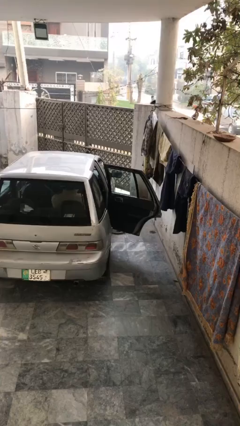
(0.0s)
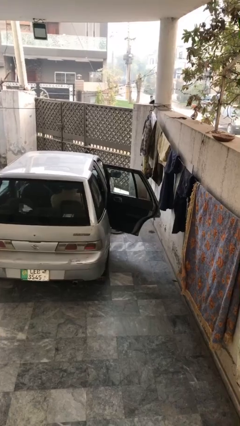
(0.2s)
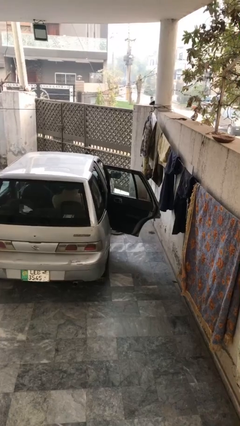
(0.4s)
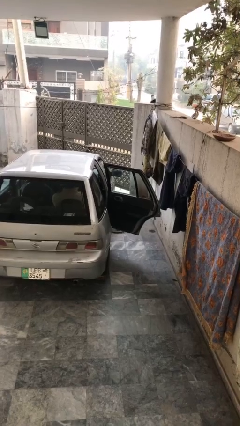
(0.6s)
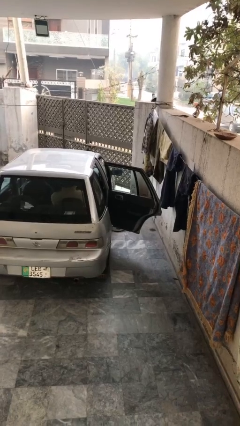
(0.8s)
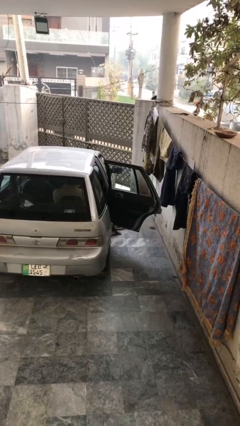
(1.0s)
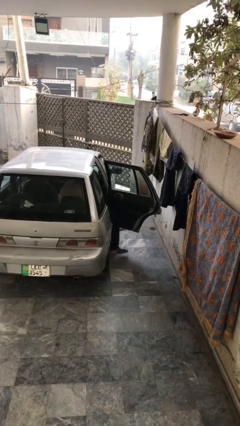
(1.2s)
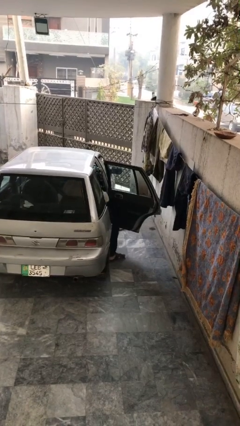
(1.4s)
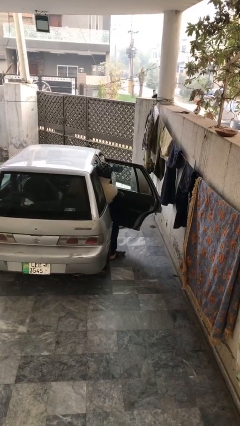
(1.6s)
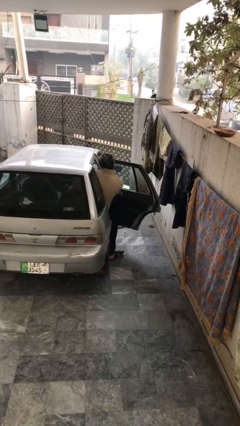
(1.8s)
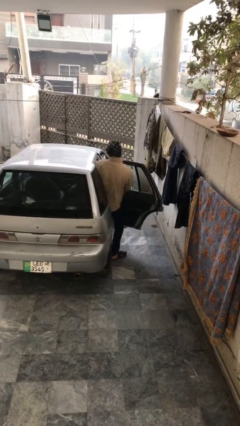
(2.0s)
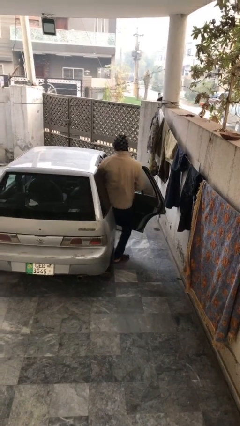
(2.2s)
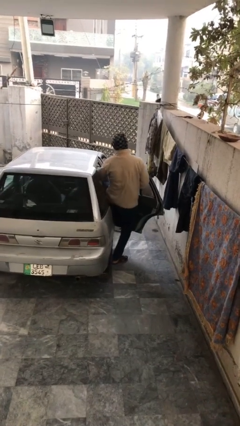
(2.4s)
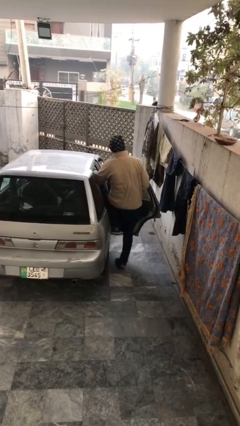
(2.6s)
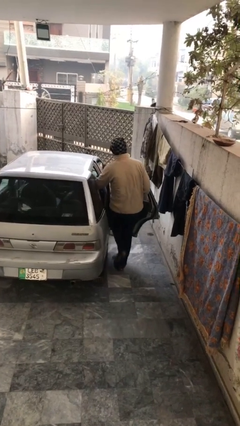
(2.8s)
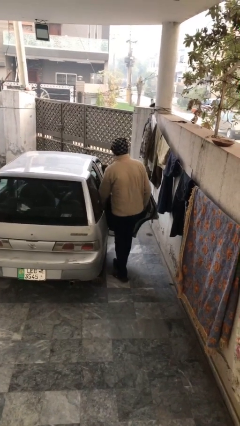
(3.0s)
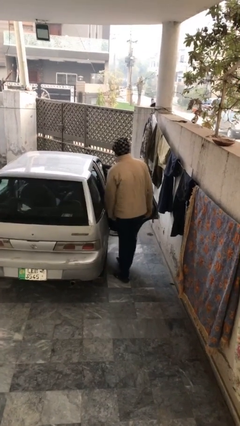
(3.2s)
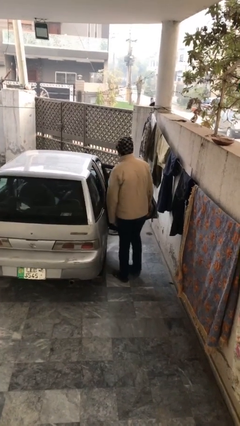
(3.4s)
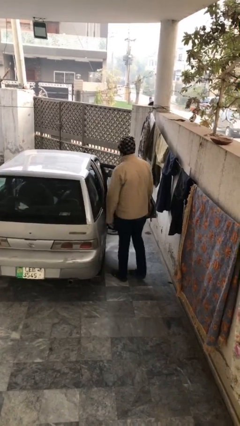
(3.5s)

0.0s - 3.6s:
person exits car

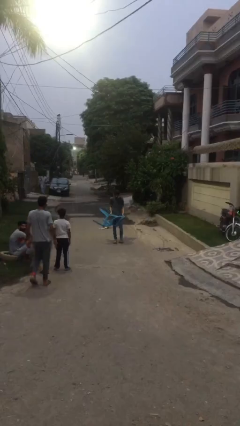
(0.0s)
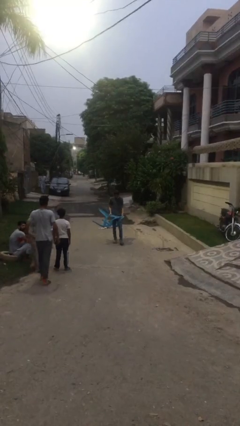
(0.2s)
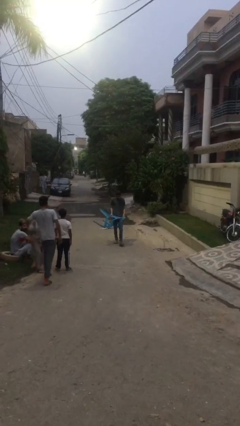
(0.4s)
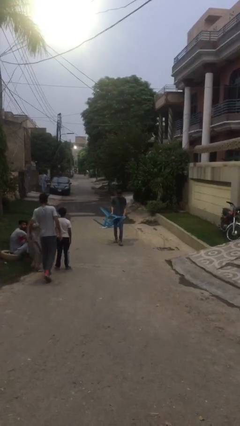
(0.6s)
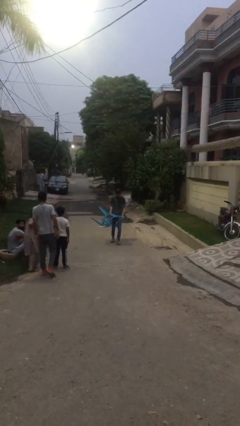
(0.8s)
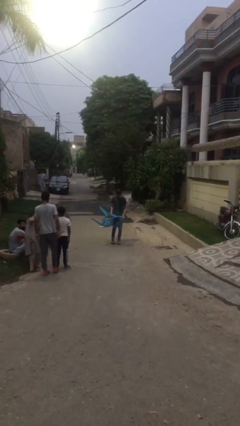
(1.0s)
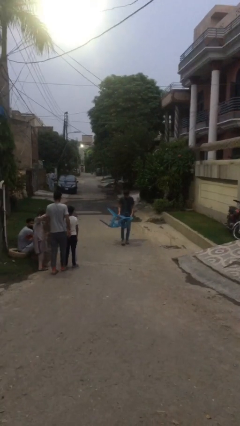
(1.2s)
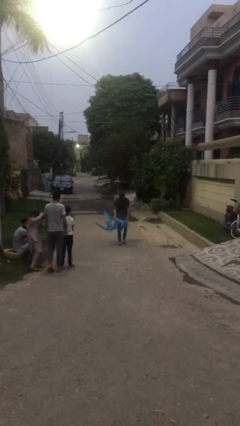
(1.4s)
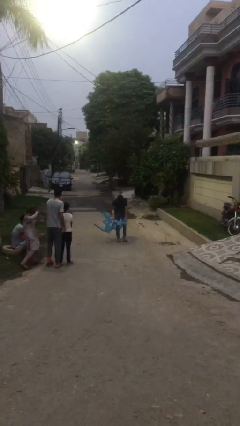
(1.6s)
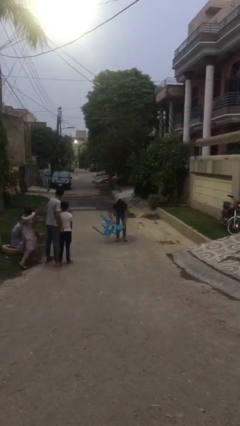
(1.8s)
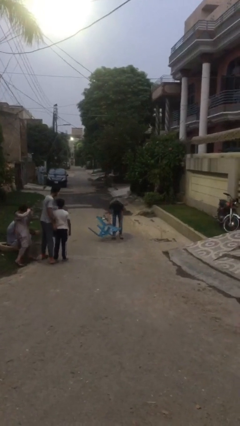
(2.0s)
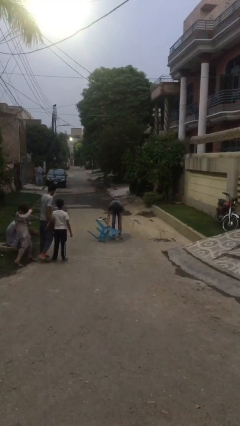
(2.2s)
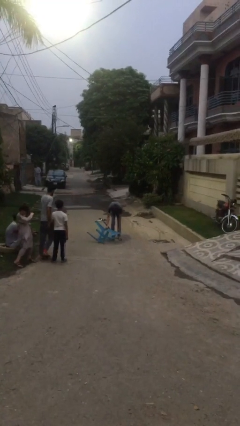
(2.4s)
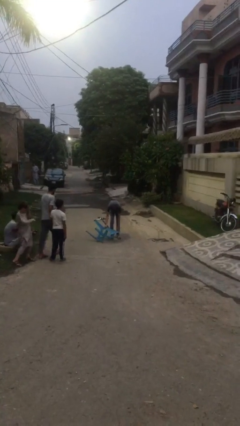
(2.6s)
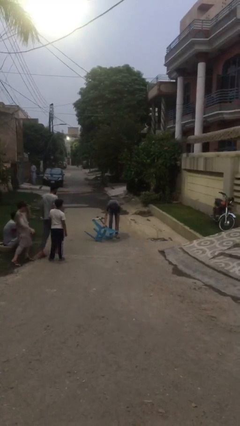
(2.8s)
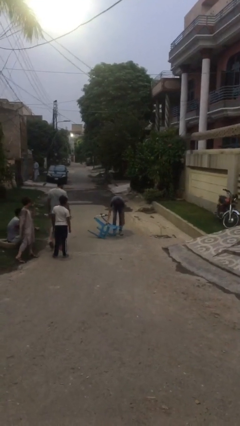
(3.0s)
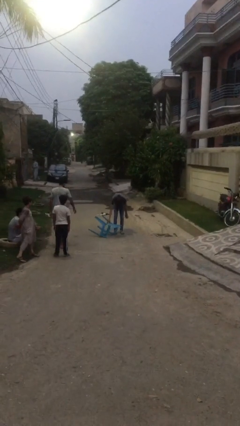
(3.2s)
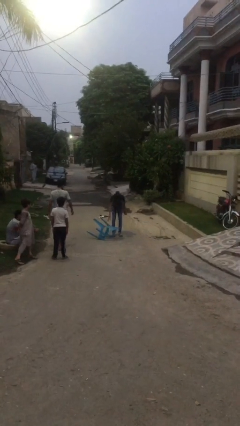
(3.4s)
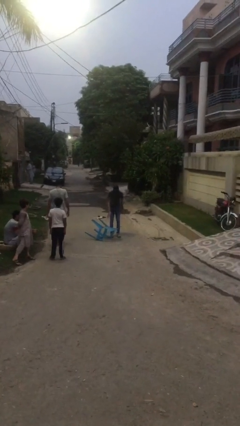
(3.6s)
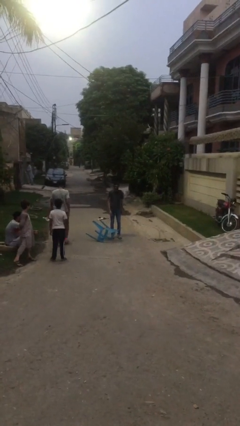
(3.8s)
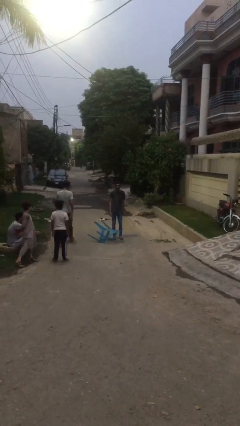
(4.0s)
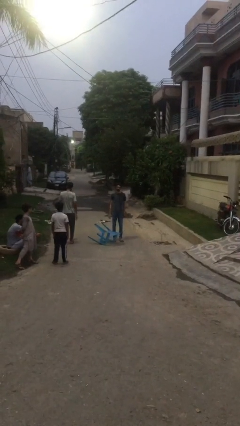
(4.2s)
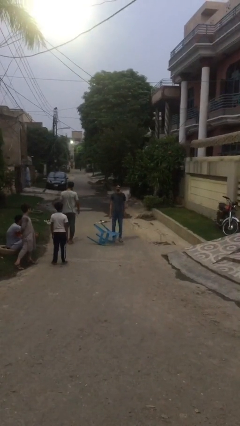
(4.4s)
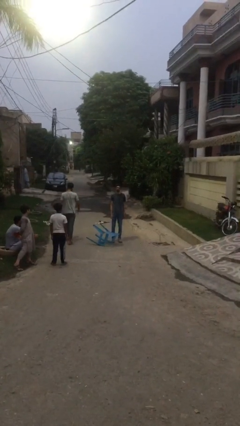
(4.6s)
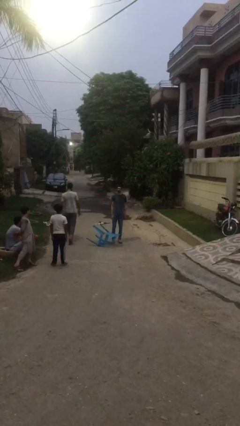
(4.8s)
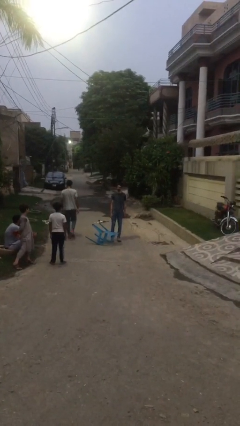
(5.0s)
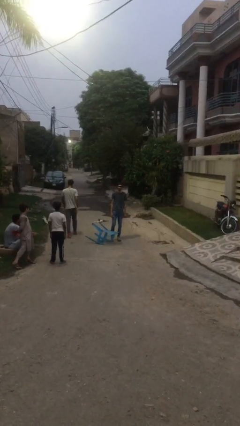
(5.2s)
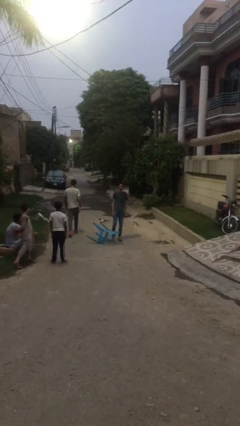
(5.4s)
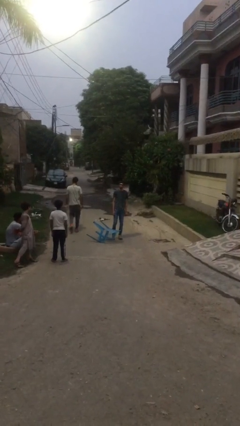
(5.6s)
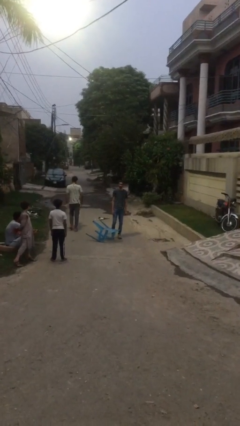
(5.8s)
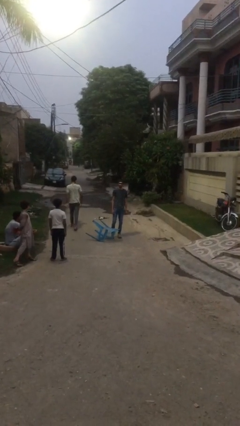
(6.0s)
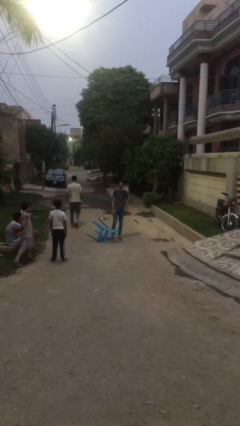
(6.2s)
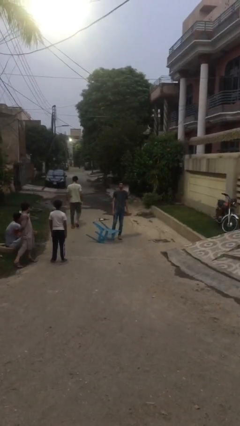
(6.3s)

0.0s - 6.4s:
person puts down object on floor

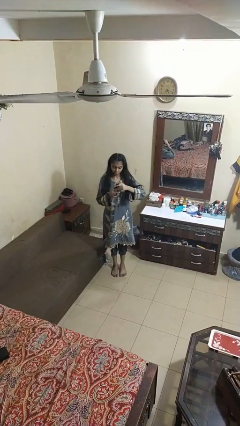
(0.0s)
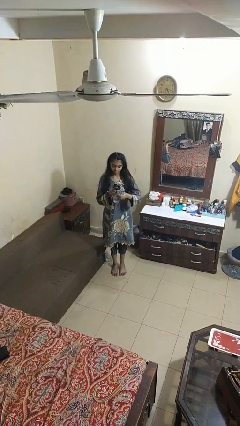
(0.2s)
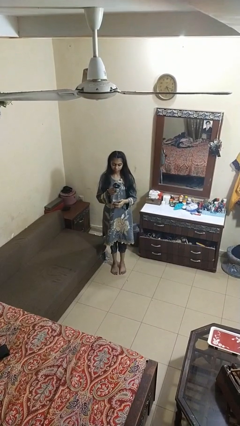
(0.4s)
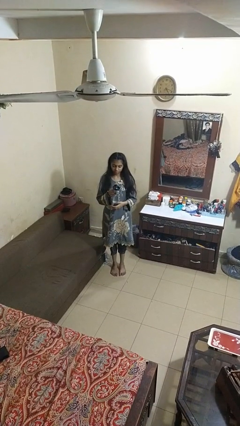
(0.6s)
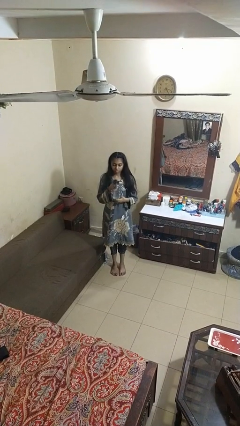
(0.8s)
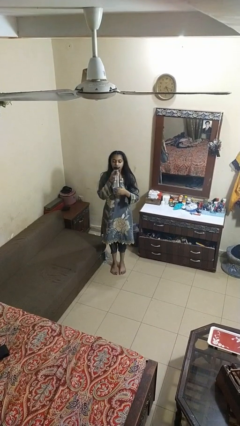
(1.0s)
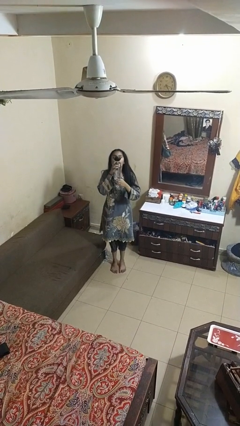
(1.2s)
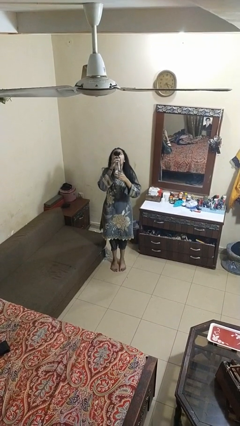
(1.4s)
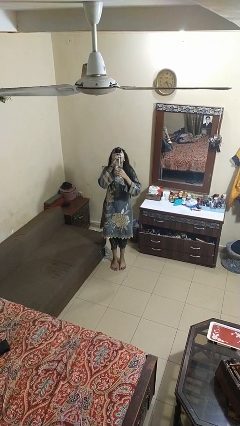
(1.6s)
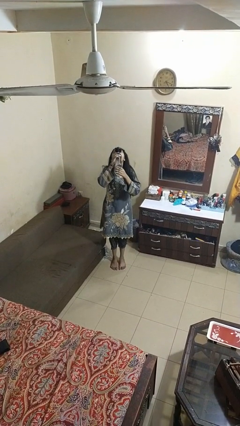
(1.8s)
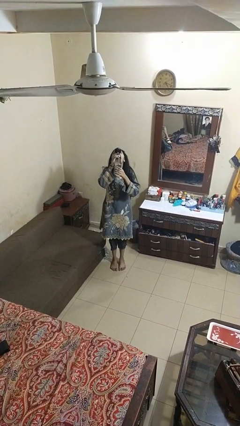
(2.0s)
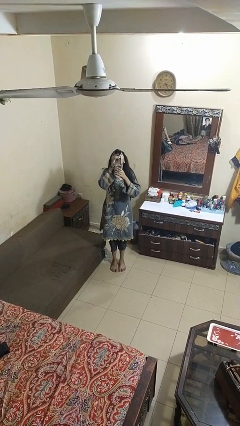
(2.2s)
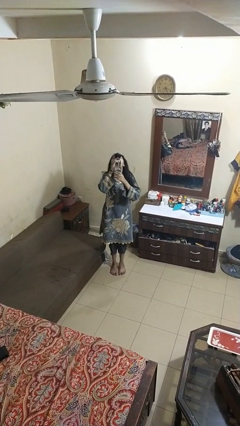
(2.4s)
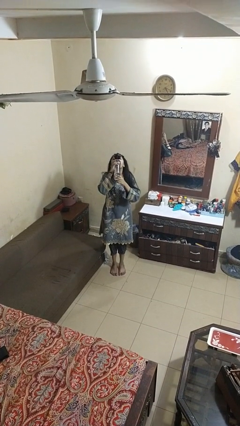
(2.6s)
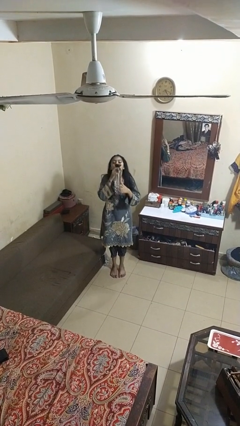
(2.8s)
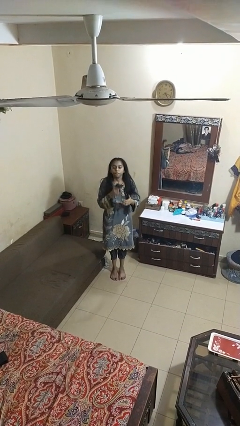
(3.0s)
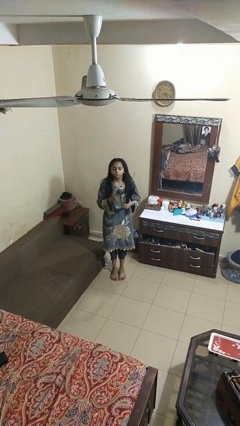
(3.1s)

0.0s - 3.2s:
person drinks from bottle

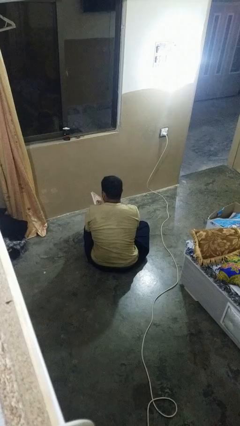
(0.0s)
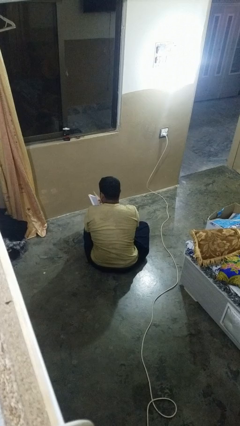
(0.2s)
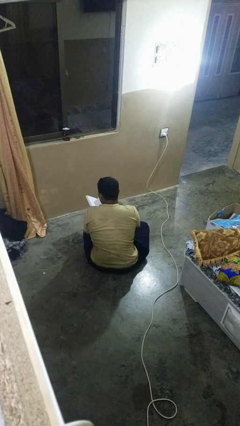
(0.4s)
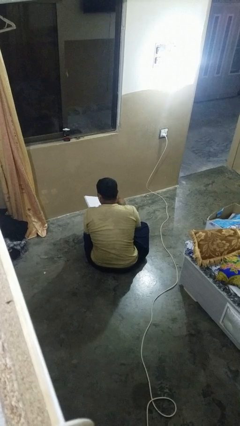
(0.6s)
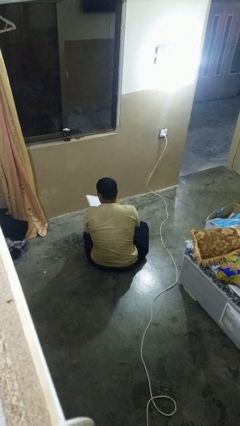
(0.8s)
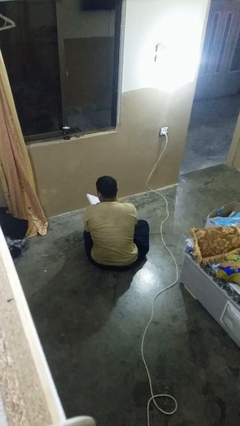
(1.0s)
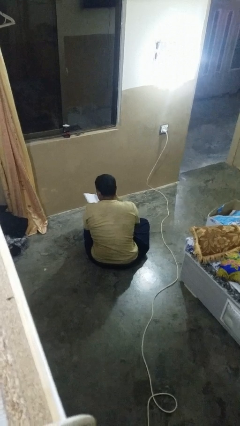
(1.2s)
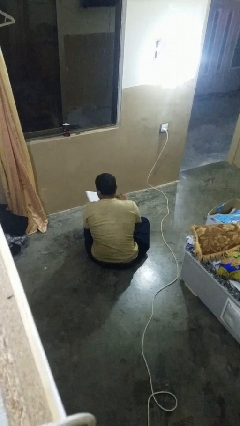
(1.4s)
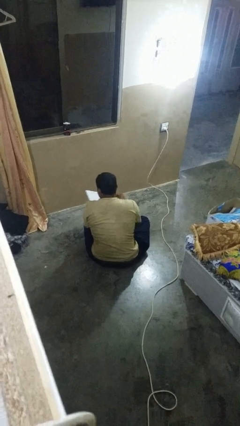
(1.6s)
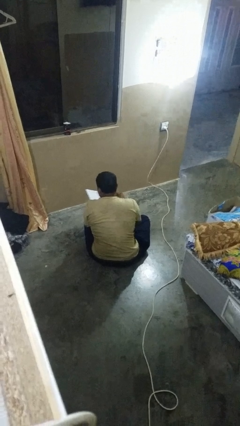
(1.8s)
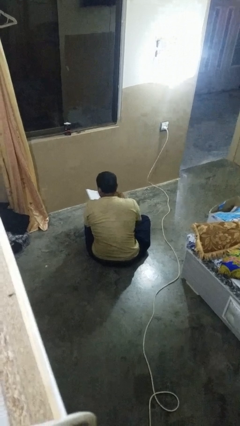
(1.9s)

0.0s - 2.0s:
person reads book

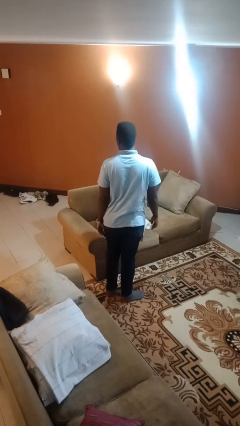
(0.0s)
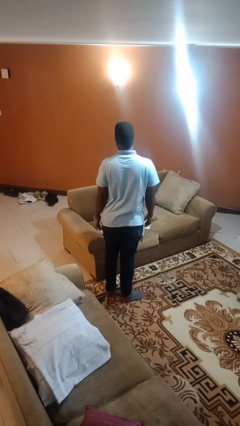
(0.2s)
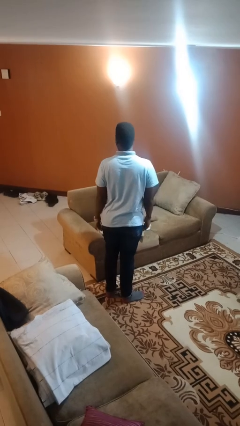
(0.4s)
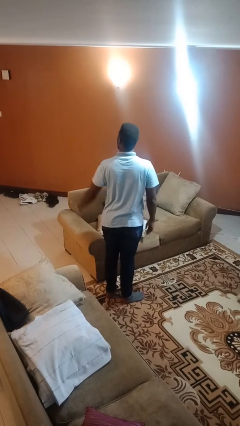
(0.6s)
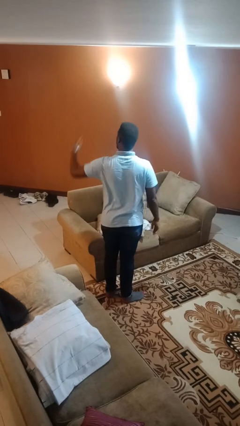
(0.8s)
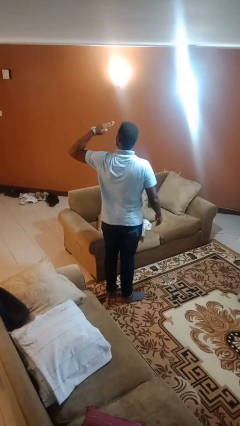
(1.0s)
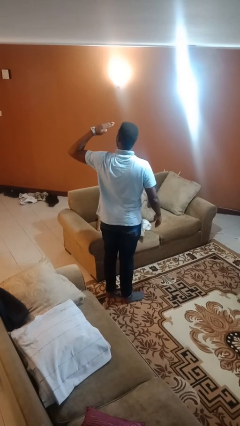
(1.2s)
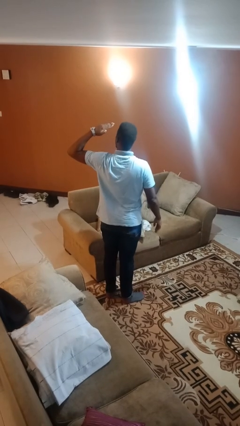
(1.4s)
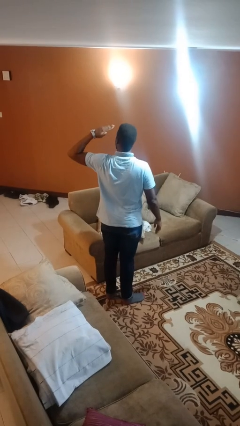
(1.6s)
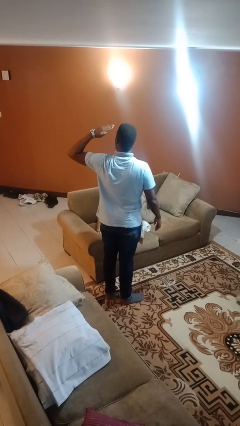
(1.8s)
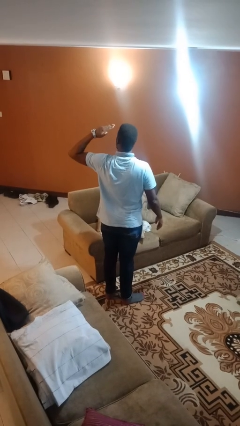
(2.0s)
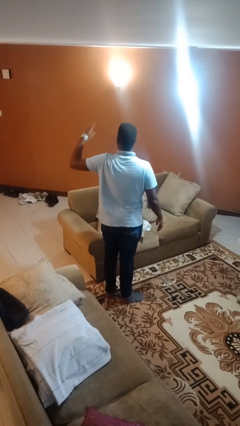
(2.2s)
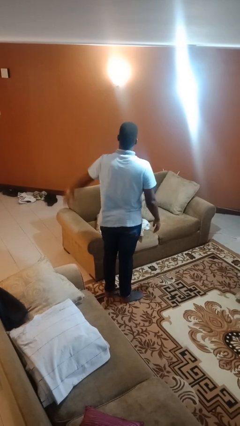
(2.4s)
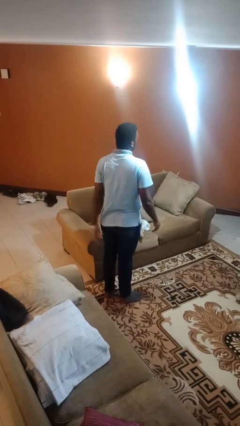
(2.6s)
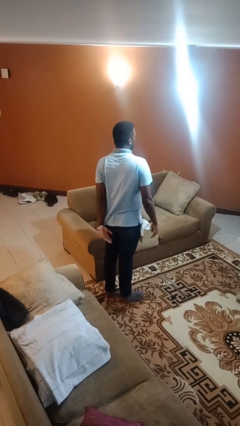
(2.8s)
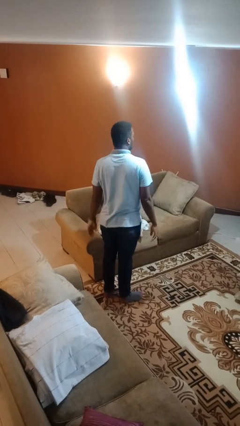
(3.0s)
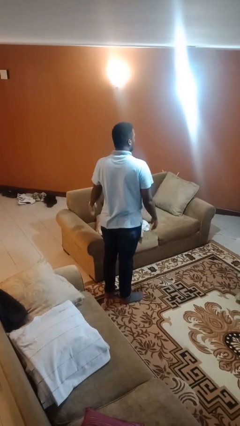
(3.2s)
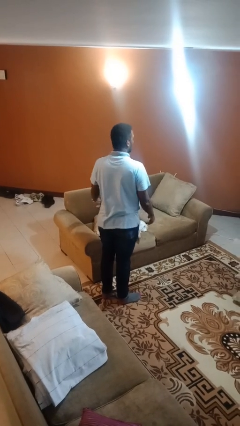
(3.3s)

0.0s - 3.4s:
person salutes
